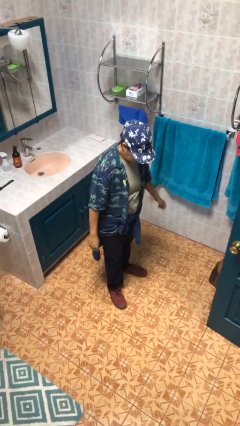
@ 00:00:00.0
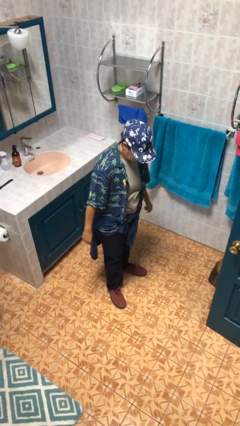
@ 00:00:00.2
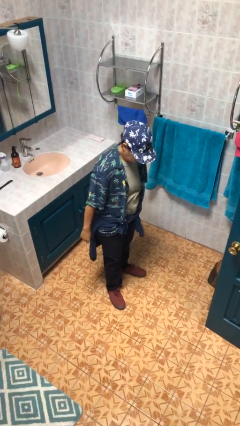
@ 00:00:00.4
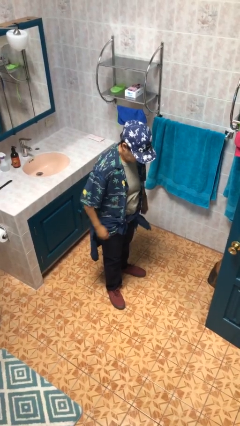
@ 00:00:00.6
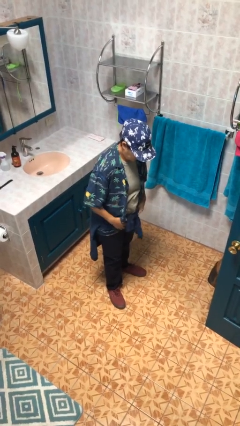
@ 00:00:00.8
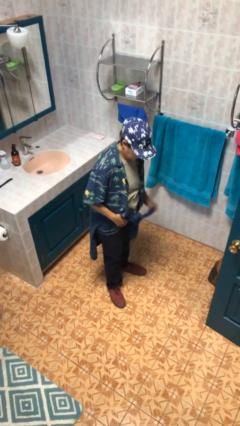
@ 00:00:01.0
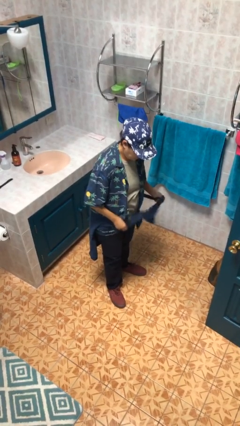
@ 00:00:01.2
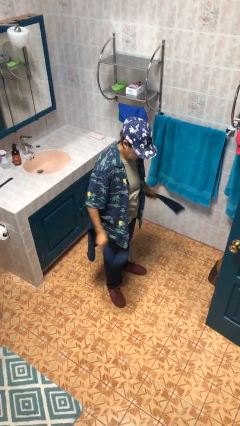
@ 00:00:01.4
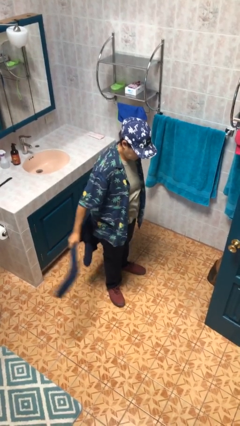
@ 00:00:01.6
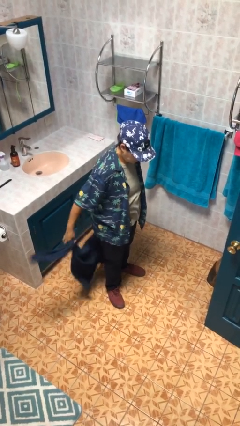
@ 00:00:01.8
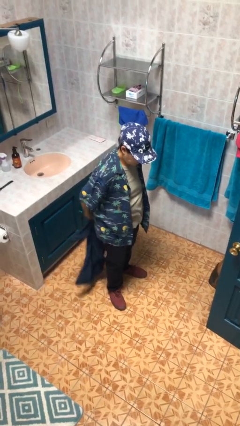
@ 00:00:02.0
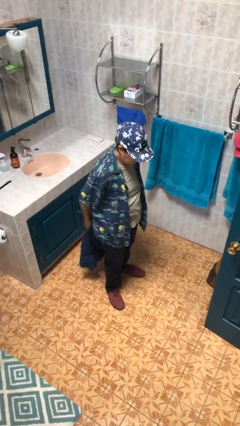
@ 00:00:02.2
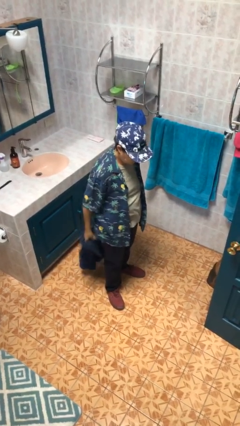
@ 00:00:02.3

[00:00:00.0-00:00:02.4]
person unties jacket around waist

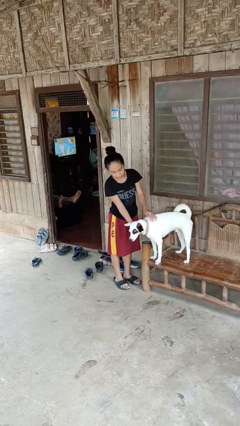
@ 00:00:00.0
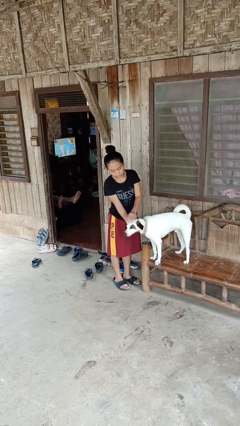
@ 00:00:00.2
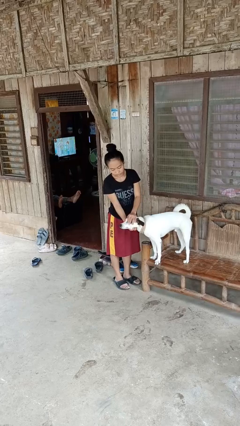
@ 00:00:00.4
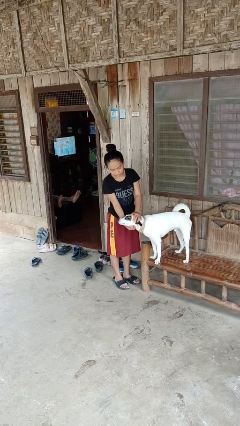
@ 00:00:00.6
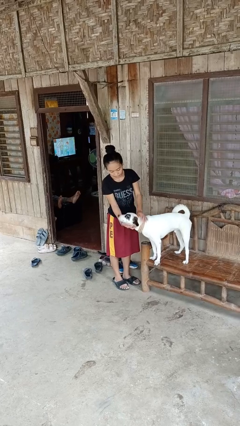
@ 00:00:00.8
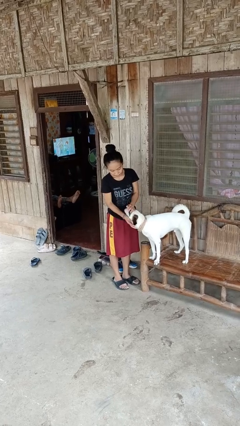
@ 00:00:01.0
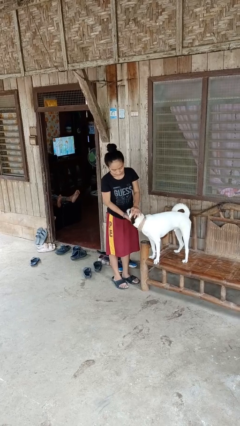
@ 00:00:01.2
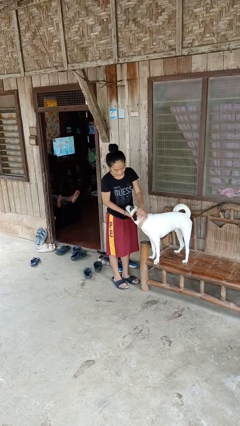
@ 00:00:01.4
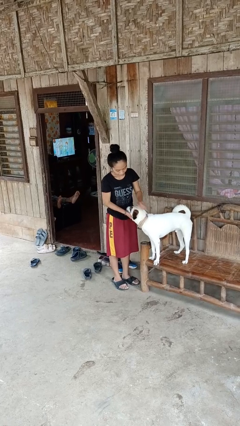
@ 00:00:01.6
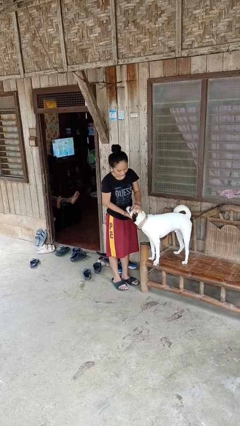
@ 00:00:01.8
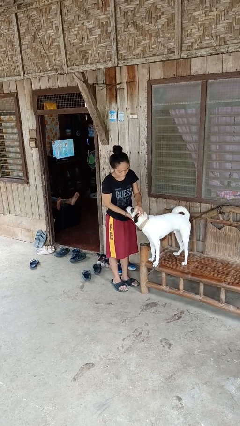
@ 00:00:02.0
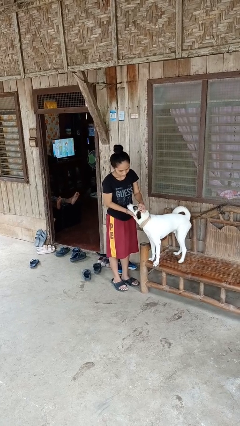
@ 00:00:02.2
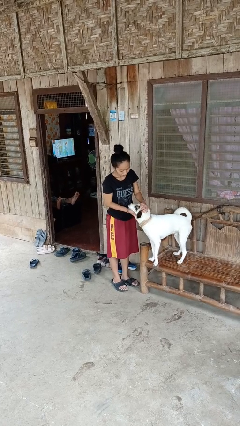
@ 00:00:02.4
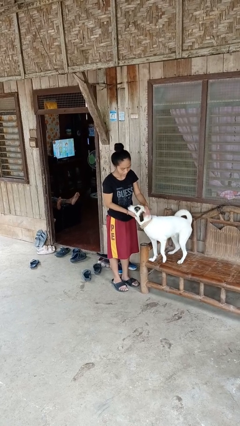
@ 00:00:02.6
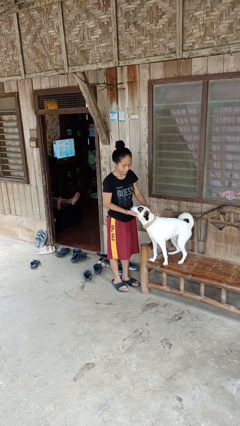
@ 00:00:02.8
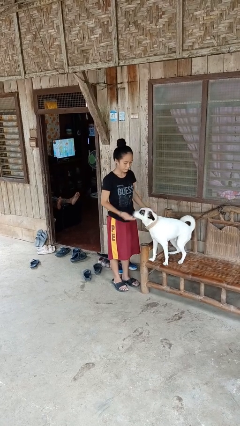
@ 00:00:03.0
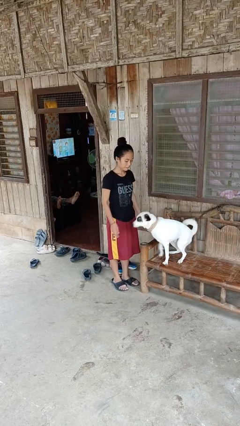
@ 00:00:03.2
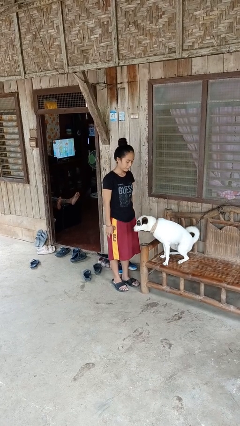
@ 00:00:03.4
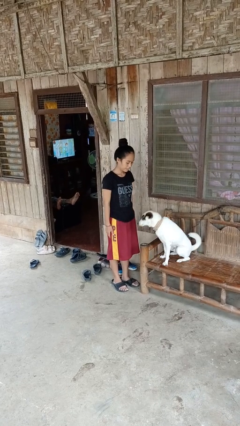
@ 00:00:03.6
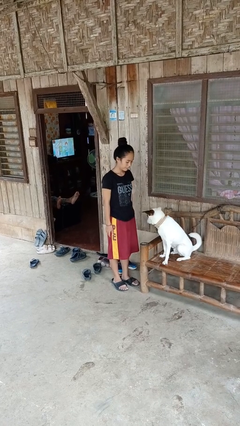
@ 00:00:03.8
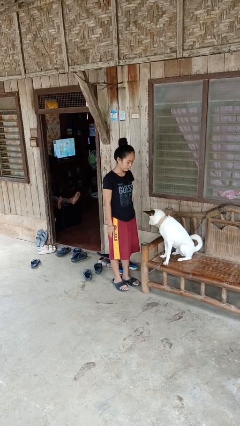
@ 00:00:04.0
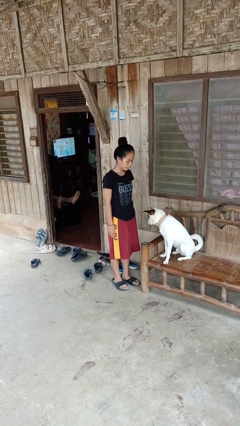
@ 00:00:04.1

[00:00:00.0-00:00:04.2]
person pets dog

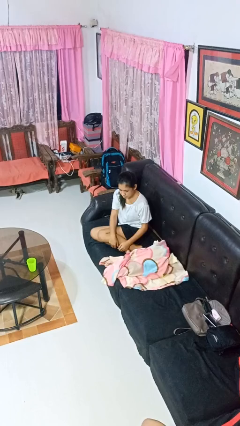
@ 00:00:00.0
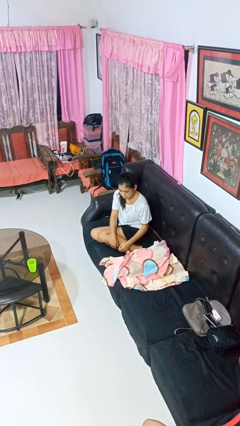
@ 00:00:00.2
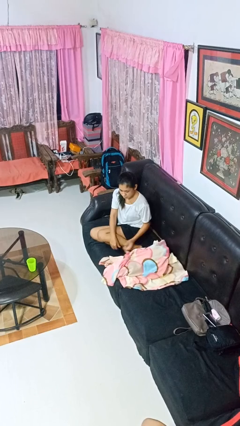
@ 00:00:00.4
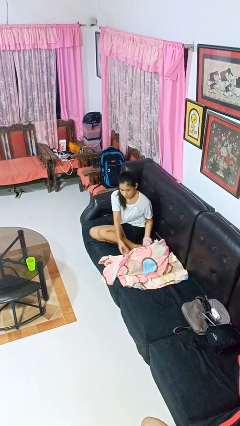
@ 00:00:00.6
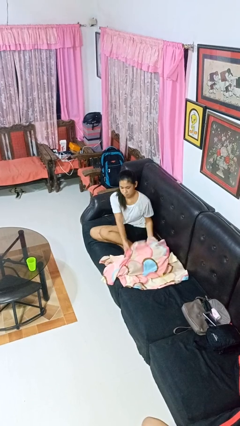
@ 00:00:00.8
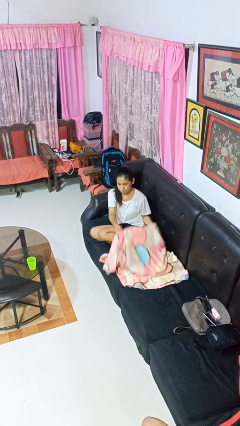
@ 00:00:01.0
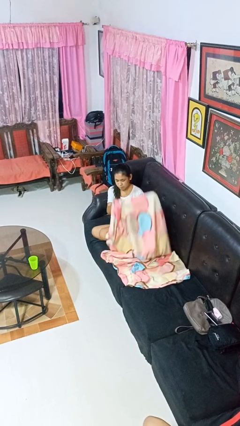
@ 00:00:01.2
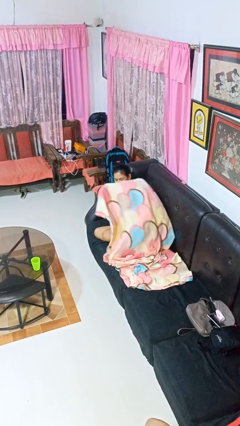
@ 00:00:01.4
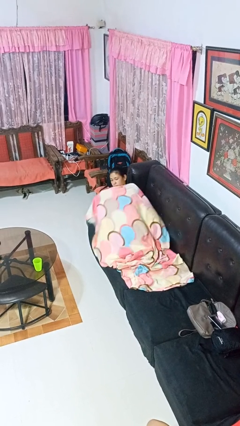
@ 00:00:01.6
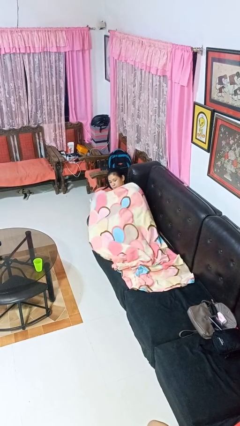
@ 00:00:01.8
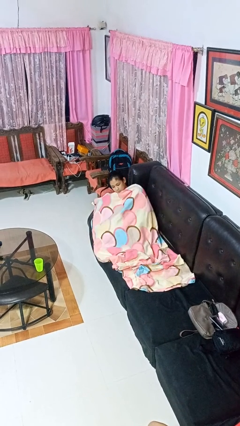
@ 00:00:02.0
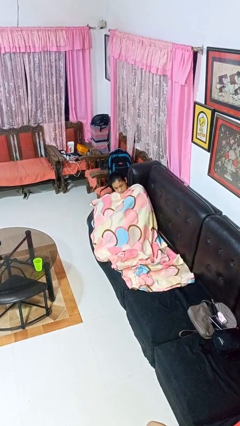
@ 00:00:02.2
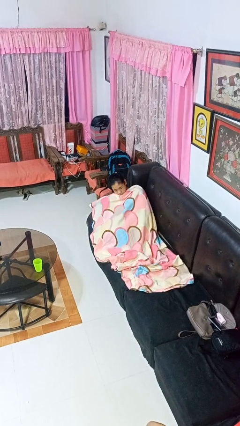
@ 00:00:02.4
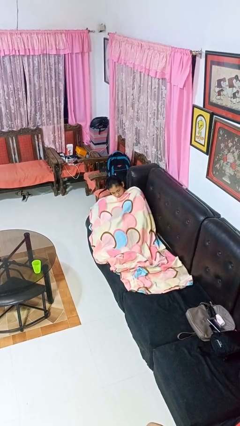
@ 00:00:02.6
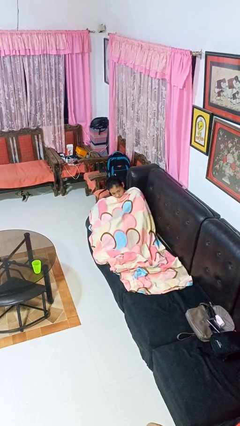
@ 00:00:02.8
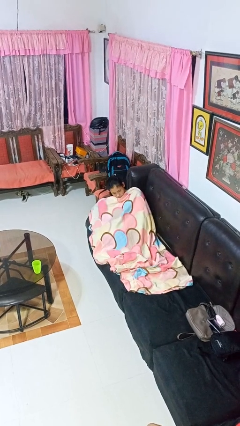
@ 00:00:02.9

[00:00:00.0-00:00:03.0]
person covers with blanket

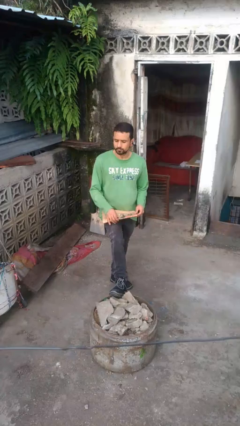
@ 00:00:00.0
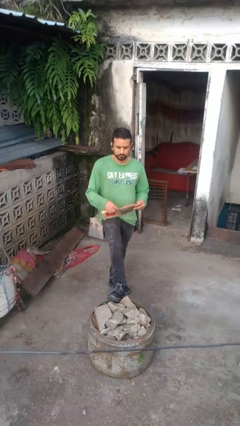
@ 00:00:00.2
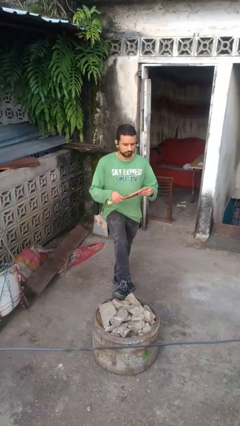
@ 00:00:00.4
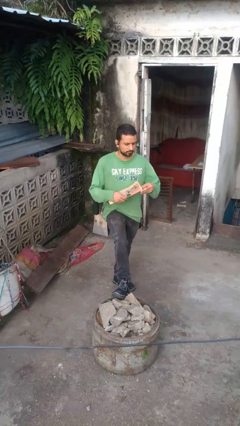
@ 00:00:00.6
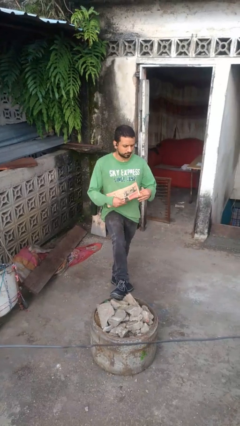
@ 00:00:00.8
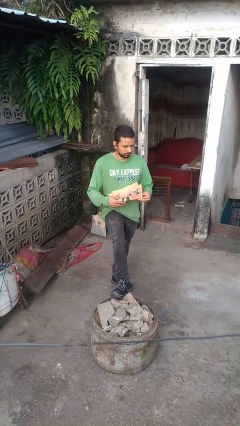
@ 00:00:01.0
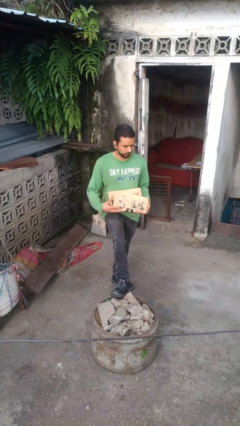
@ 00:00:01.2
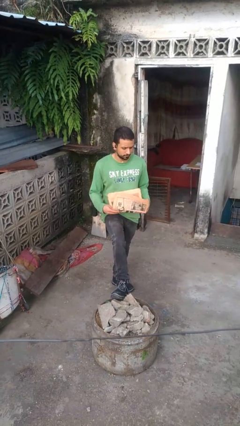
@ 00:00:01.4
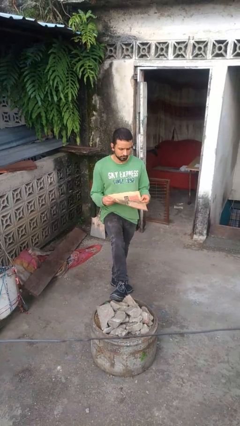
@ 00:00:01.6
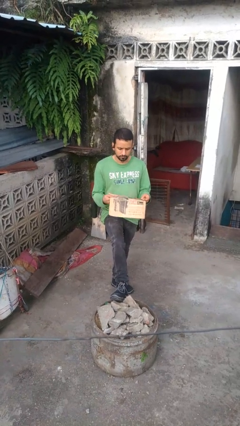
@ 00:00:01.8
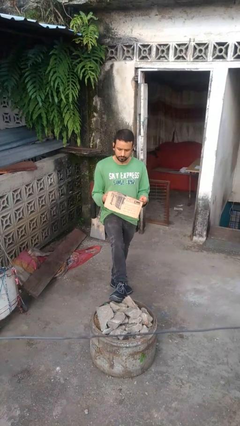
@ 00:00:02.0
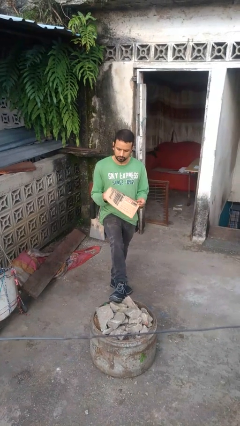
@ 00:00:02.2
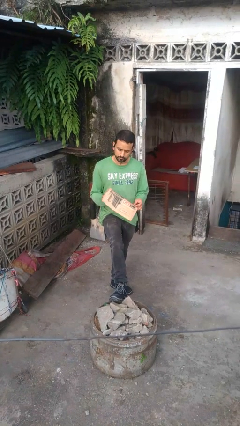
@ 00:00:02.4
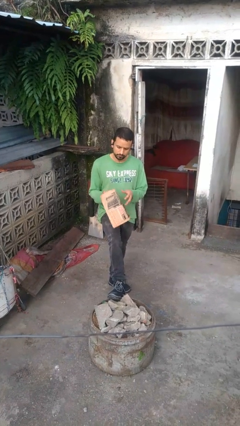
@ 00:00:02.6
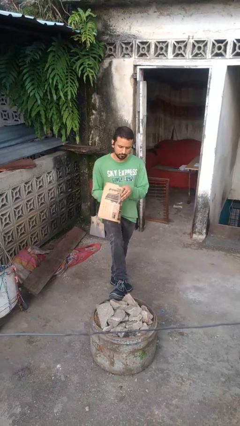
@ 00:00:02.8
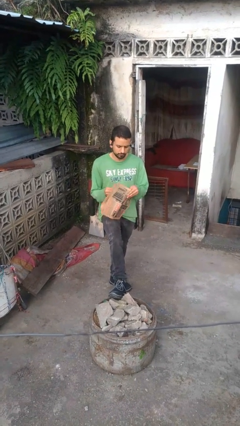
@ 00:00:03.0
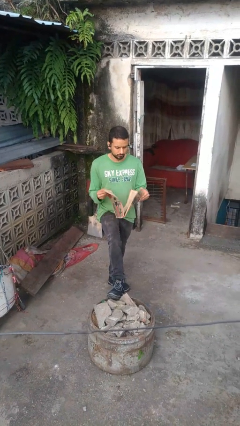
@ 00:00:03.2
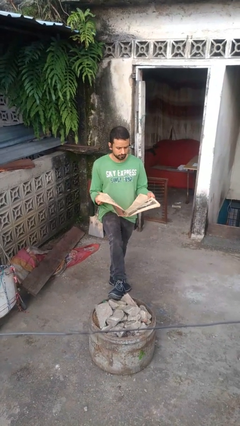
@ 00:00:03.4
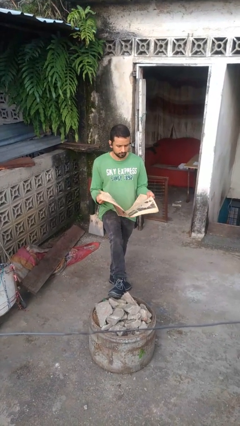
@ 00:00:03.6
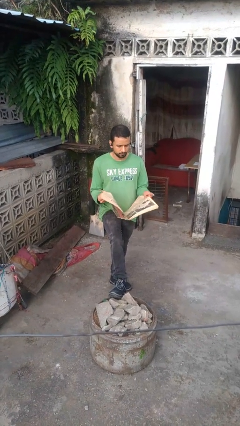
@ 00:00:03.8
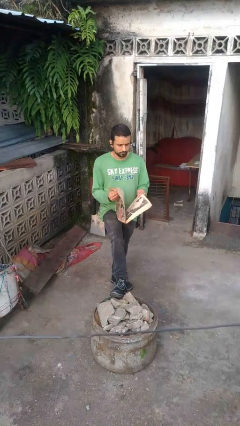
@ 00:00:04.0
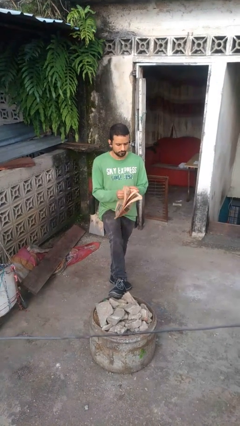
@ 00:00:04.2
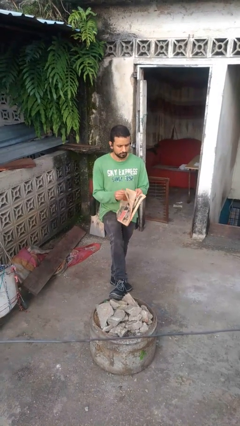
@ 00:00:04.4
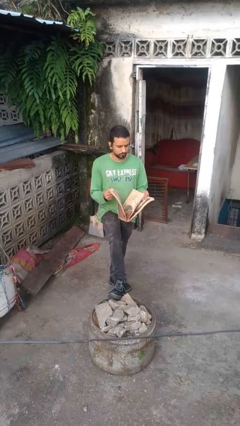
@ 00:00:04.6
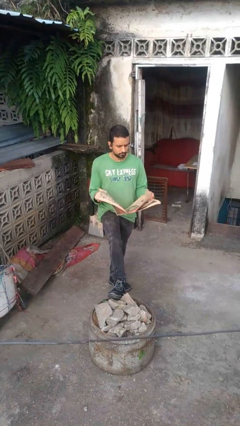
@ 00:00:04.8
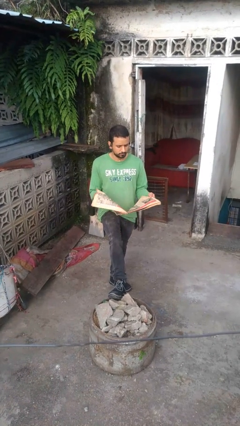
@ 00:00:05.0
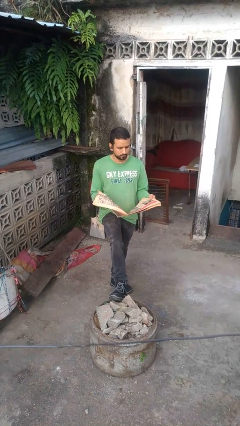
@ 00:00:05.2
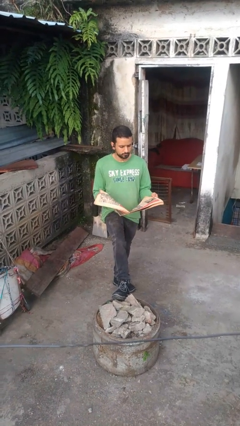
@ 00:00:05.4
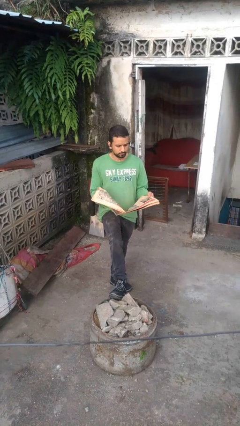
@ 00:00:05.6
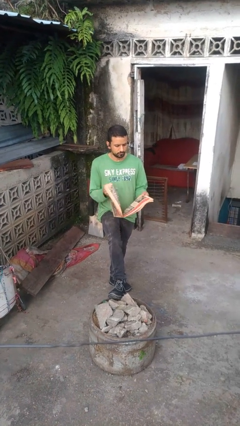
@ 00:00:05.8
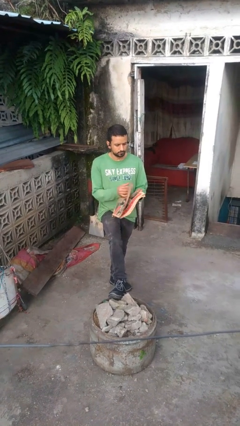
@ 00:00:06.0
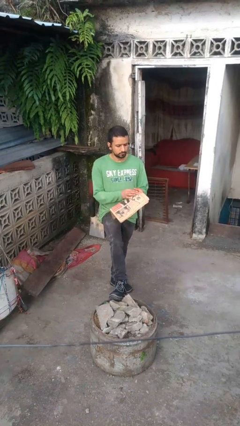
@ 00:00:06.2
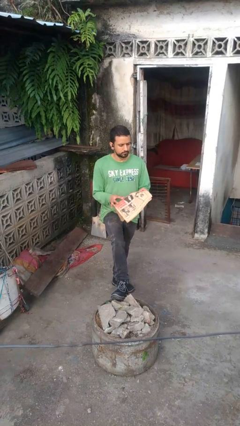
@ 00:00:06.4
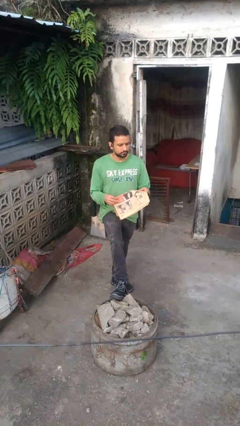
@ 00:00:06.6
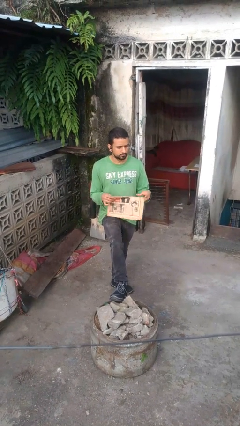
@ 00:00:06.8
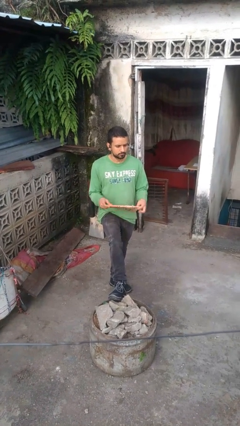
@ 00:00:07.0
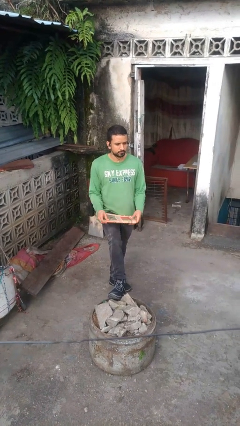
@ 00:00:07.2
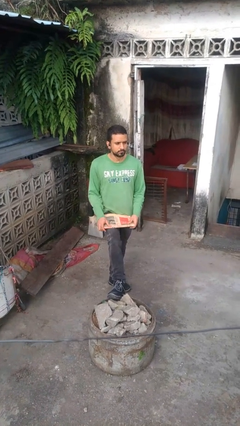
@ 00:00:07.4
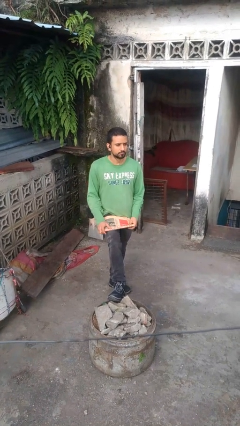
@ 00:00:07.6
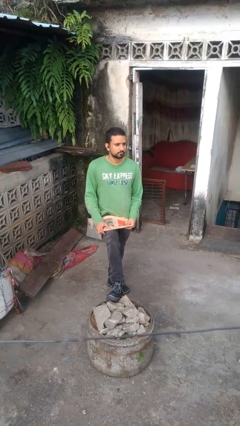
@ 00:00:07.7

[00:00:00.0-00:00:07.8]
person reads newspaper
